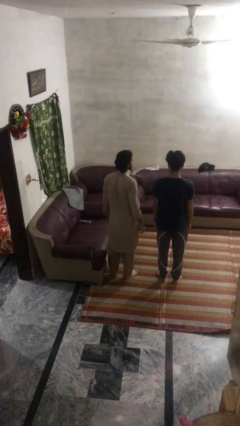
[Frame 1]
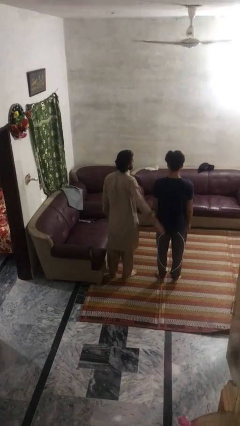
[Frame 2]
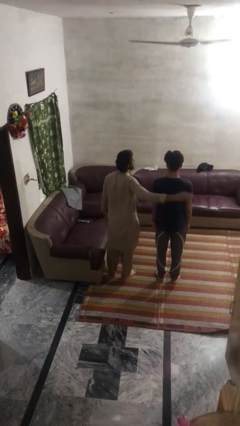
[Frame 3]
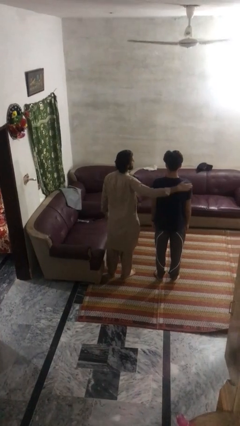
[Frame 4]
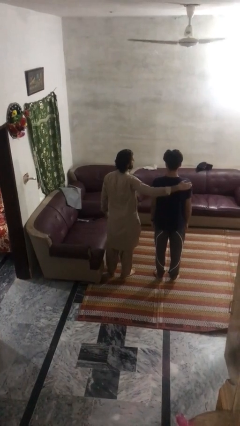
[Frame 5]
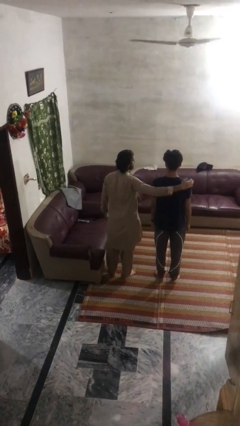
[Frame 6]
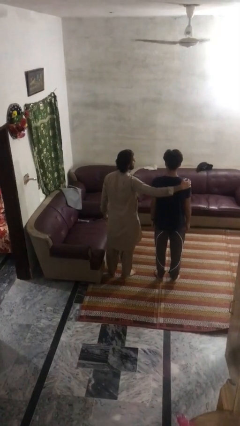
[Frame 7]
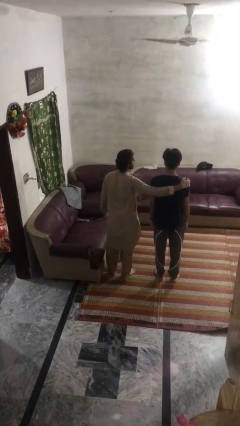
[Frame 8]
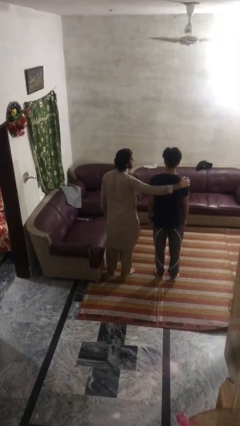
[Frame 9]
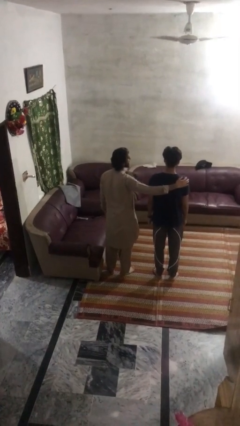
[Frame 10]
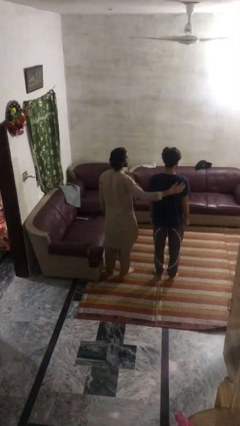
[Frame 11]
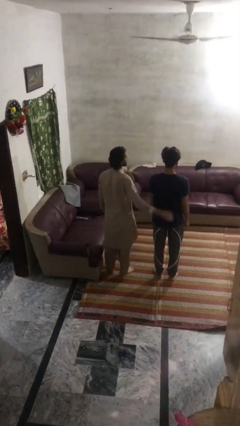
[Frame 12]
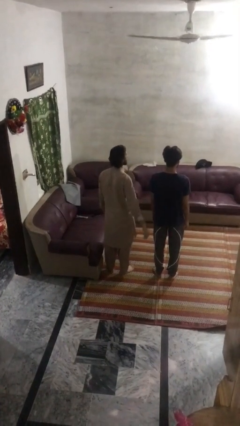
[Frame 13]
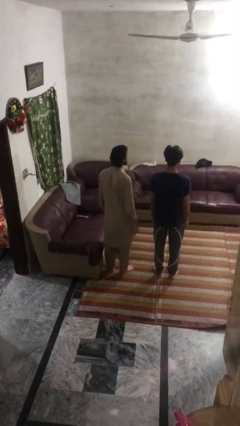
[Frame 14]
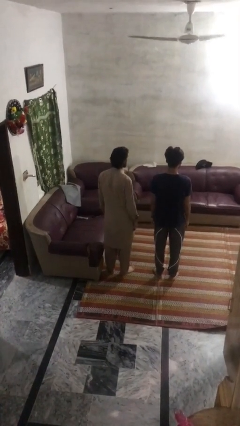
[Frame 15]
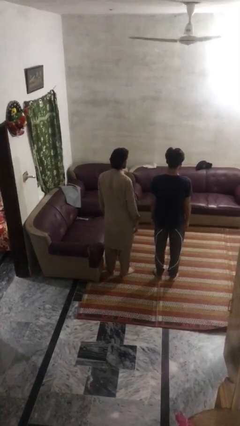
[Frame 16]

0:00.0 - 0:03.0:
person pounds shoulders of person

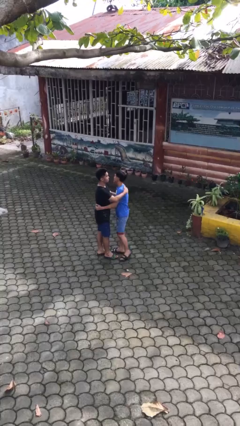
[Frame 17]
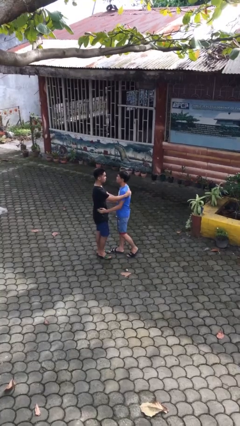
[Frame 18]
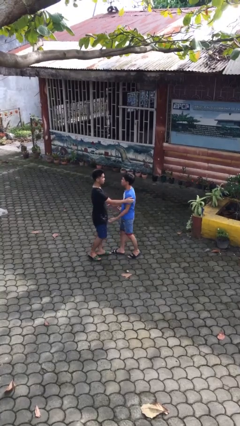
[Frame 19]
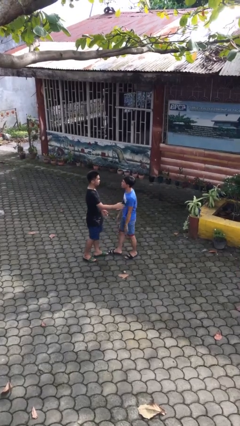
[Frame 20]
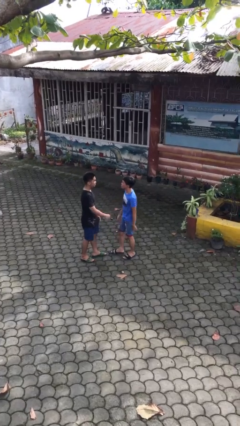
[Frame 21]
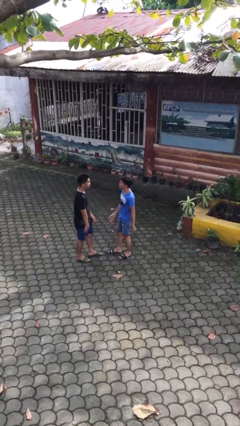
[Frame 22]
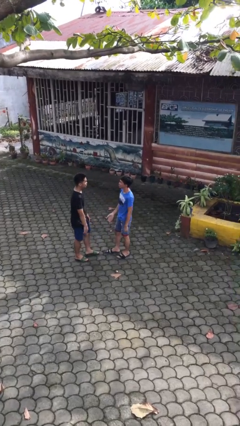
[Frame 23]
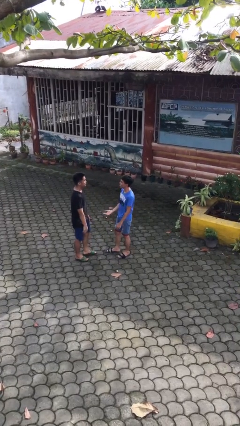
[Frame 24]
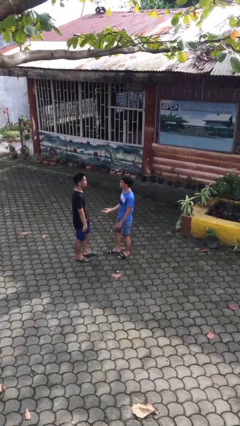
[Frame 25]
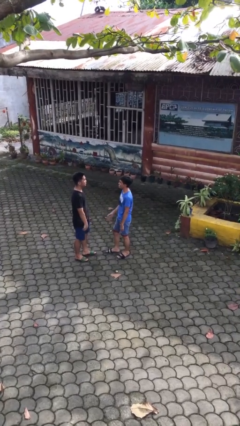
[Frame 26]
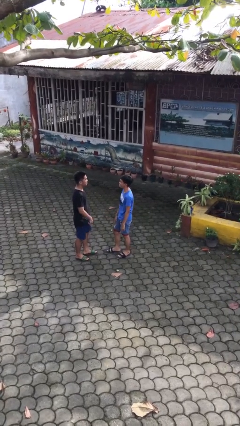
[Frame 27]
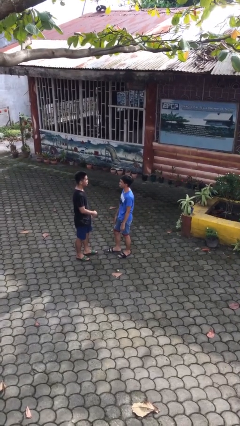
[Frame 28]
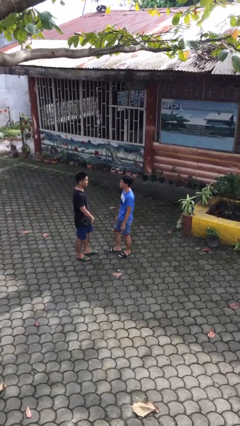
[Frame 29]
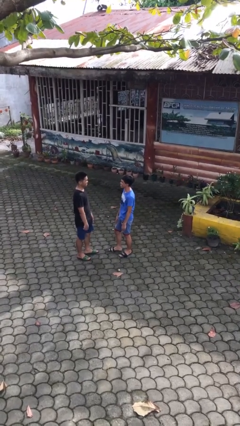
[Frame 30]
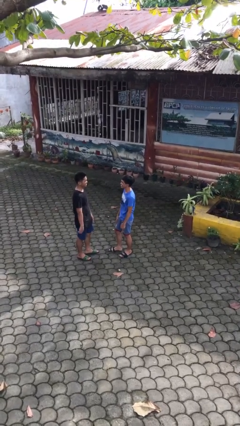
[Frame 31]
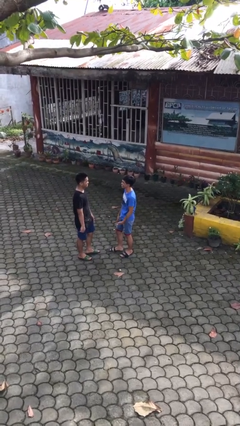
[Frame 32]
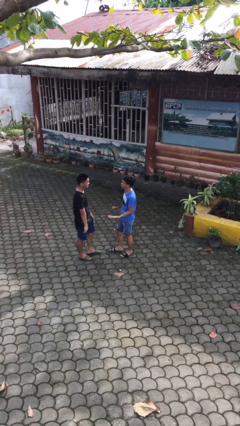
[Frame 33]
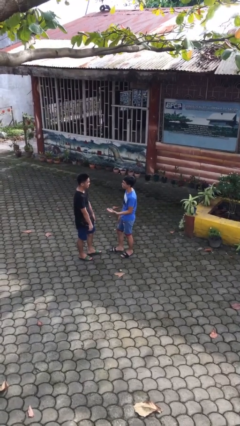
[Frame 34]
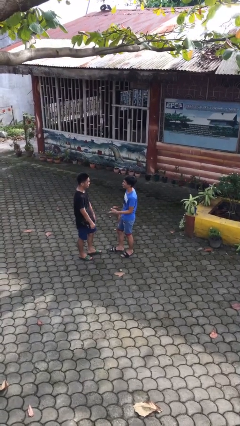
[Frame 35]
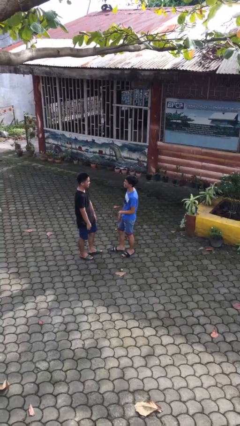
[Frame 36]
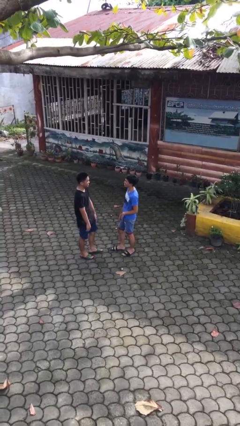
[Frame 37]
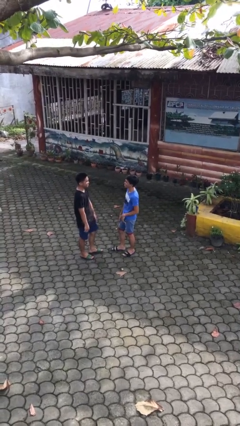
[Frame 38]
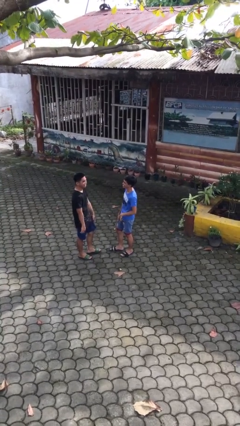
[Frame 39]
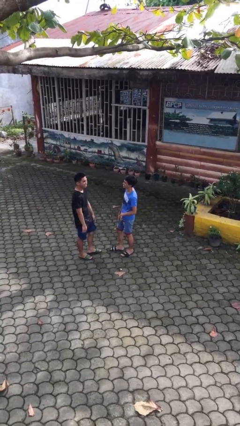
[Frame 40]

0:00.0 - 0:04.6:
person talks to person

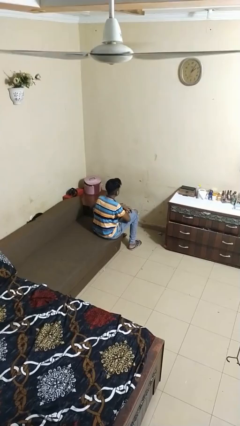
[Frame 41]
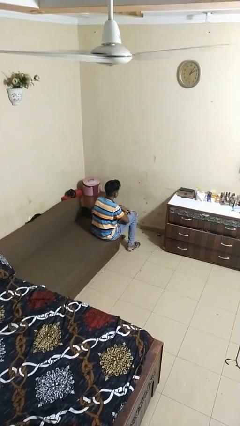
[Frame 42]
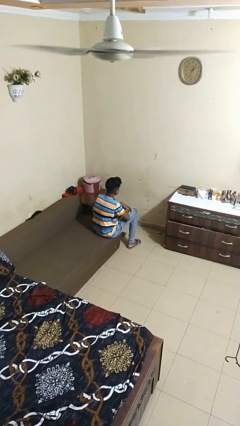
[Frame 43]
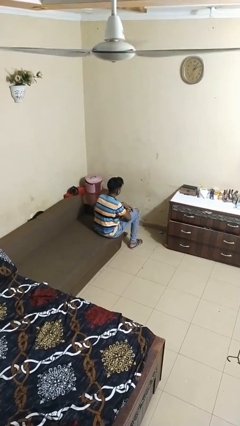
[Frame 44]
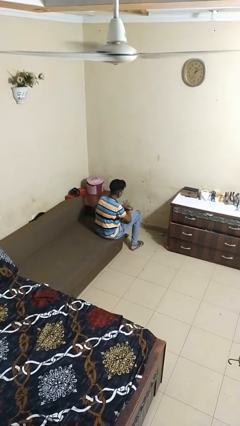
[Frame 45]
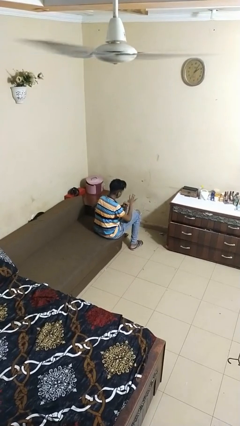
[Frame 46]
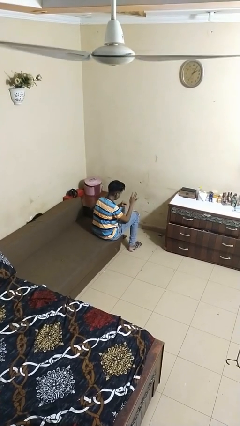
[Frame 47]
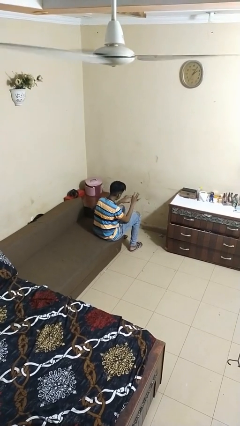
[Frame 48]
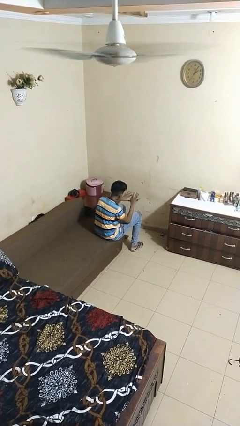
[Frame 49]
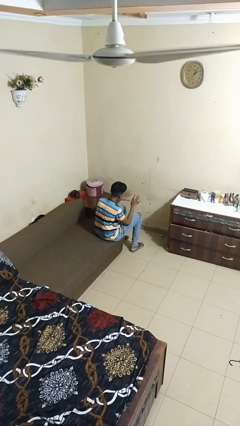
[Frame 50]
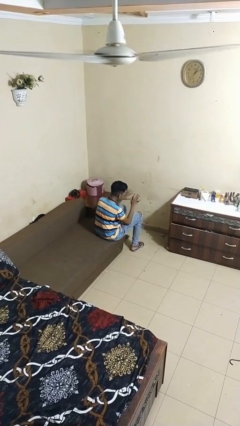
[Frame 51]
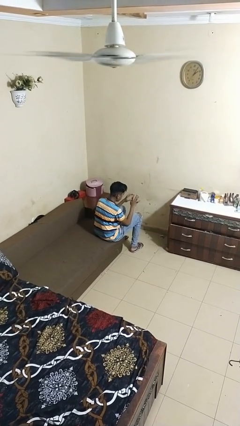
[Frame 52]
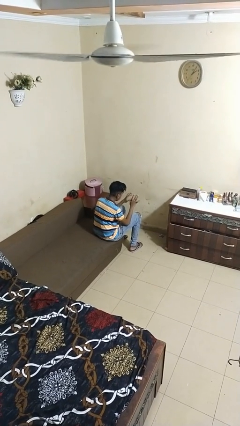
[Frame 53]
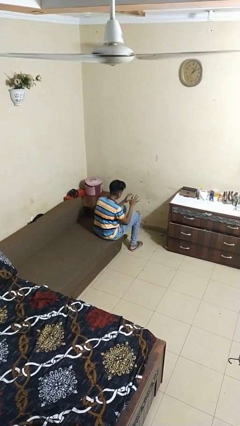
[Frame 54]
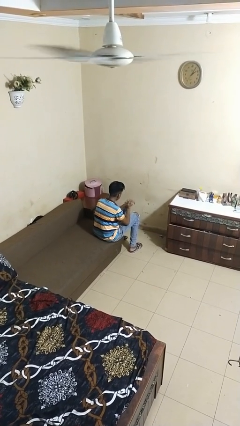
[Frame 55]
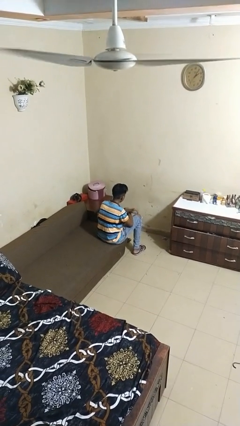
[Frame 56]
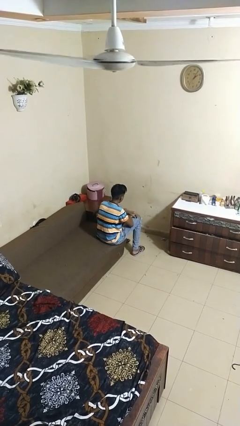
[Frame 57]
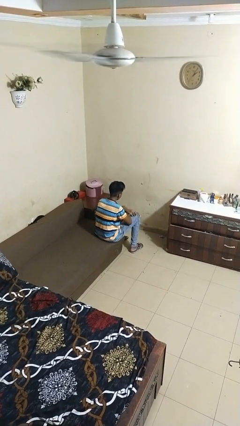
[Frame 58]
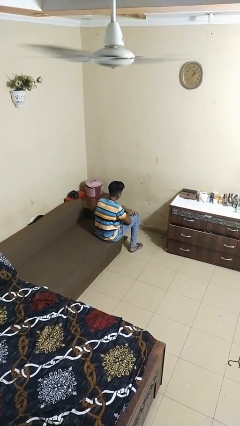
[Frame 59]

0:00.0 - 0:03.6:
person looks at hands in lap

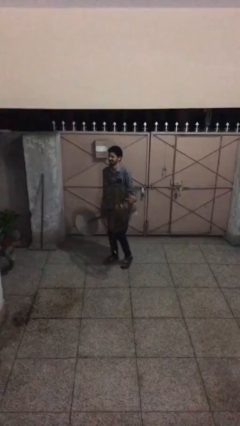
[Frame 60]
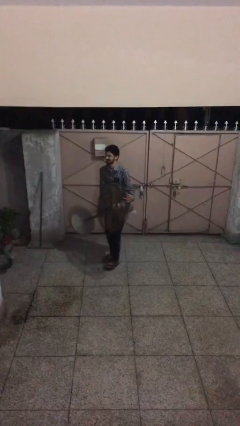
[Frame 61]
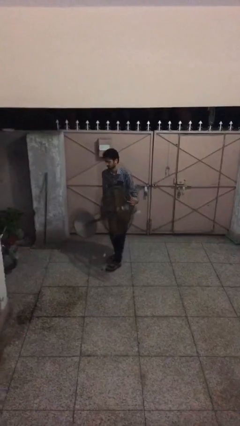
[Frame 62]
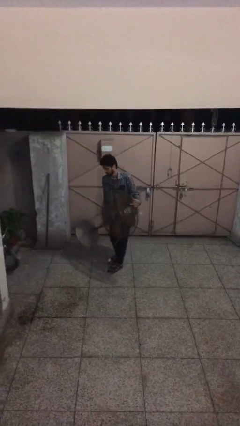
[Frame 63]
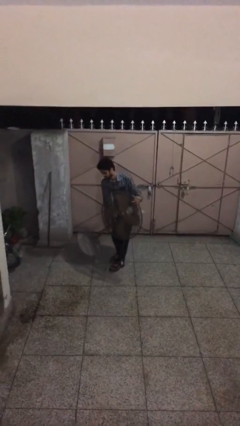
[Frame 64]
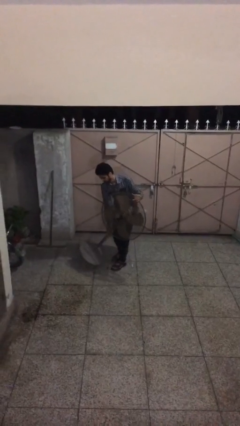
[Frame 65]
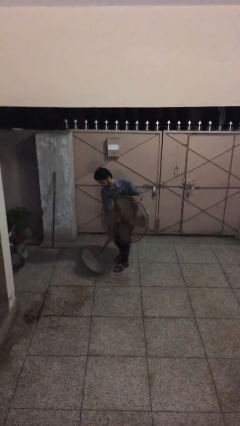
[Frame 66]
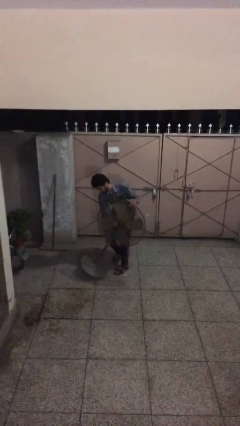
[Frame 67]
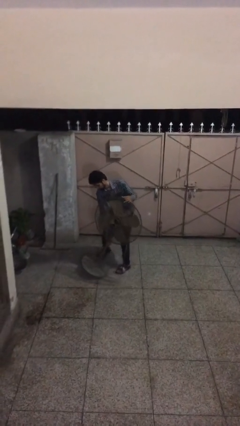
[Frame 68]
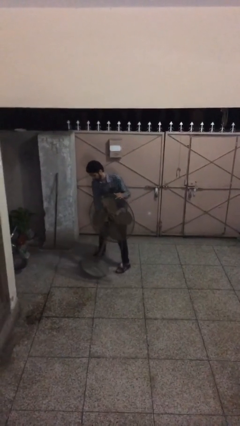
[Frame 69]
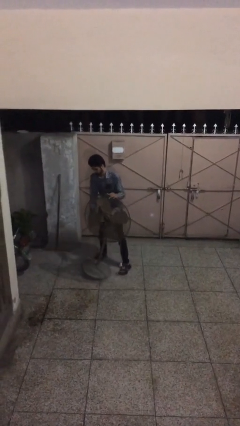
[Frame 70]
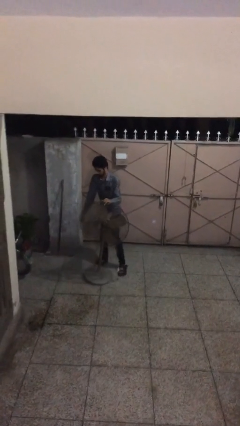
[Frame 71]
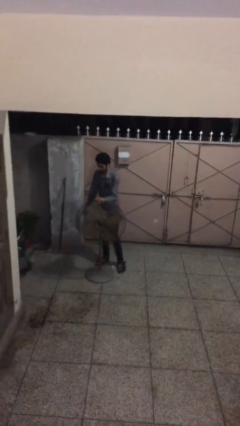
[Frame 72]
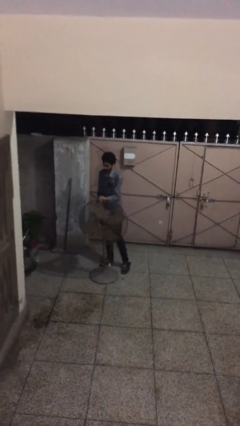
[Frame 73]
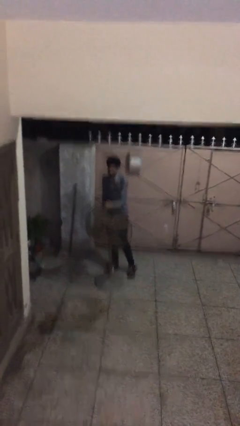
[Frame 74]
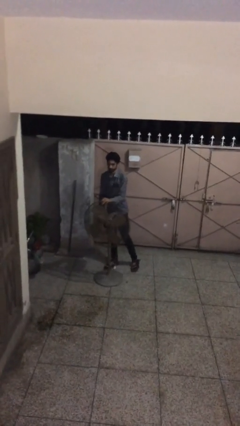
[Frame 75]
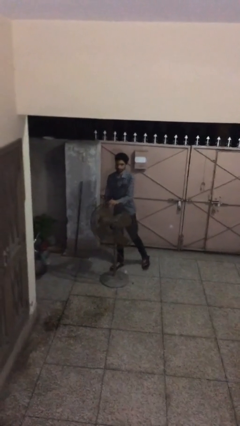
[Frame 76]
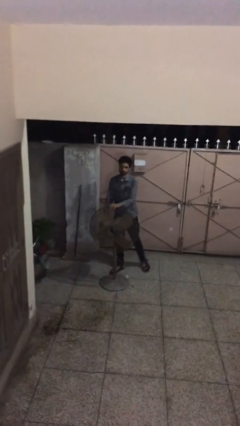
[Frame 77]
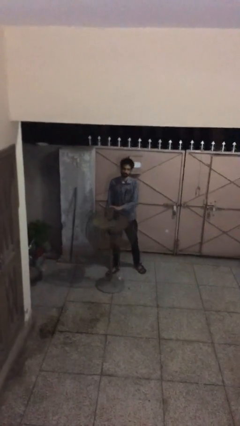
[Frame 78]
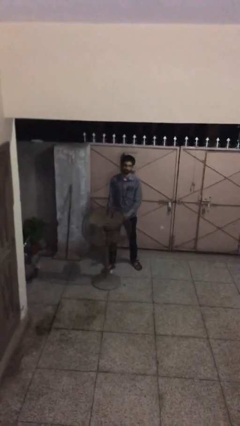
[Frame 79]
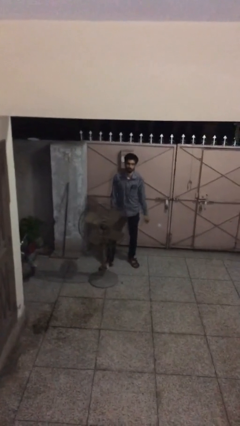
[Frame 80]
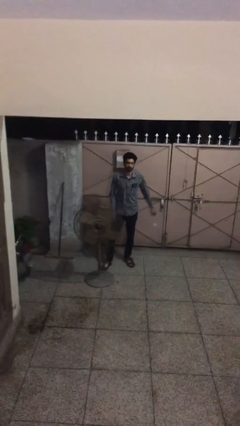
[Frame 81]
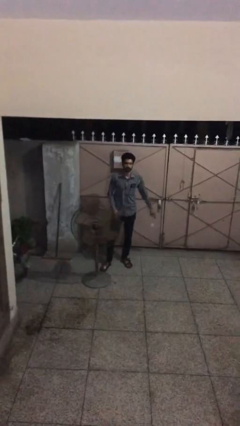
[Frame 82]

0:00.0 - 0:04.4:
person puts down object on floor

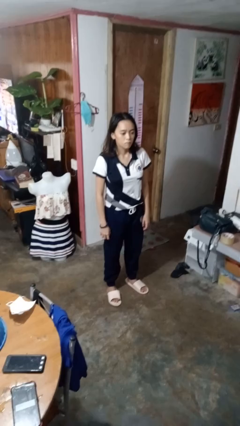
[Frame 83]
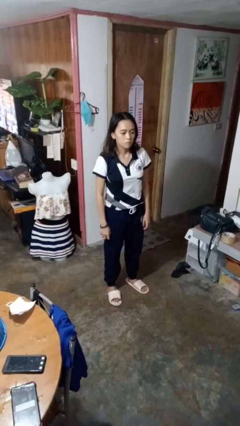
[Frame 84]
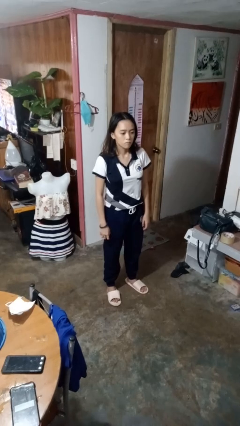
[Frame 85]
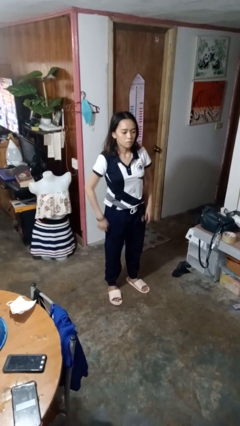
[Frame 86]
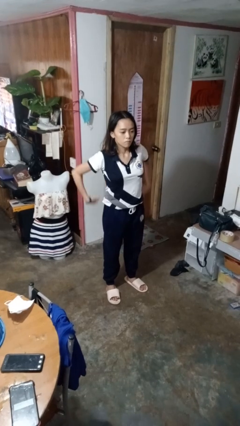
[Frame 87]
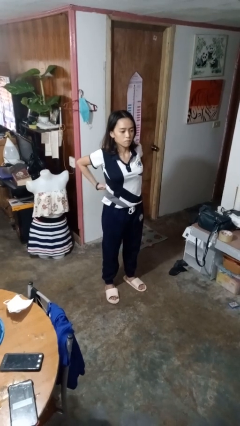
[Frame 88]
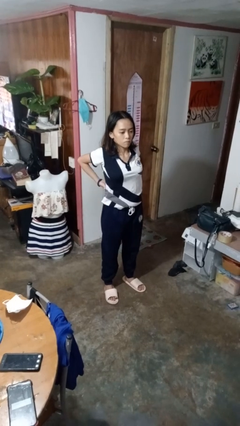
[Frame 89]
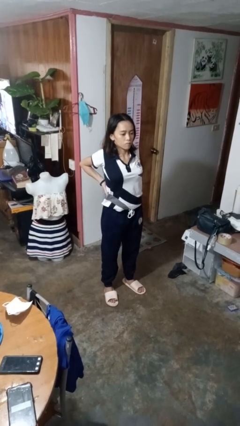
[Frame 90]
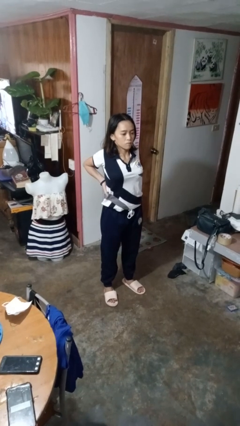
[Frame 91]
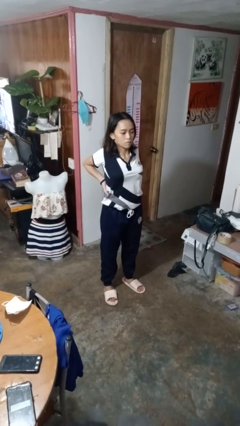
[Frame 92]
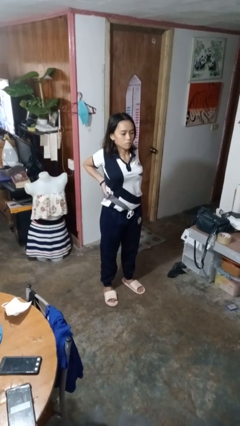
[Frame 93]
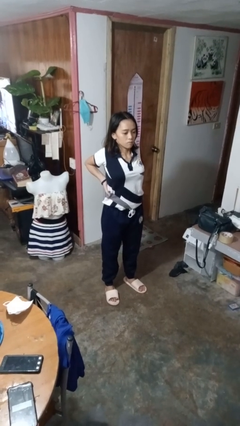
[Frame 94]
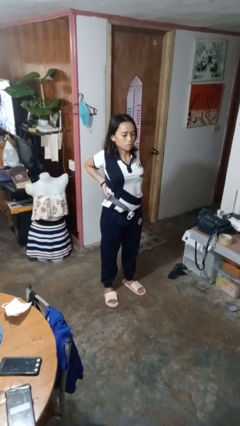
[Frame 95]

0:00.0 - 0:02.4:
person stretches back
